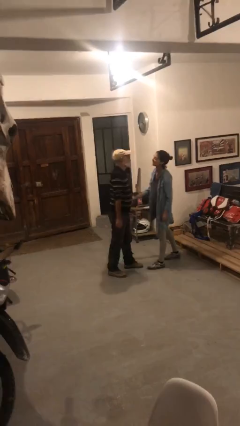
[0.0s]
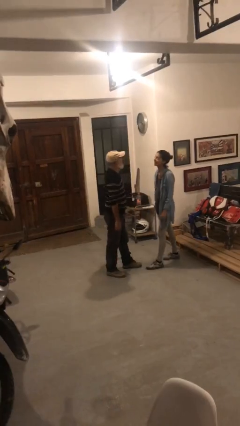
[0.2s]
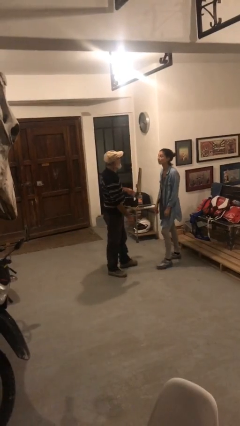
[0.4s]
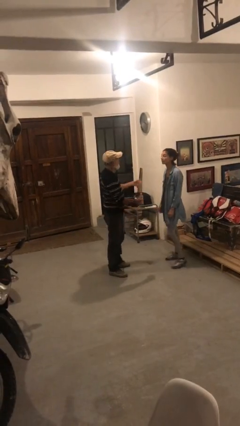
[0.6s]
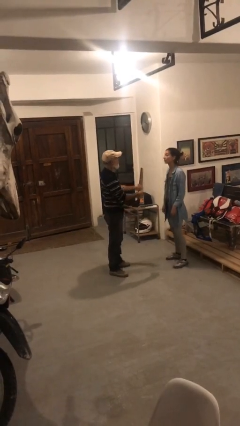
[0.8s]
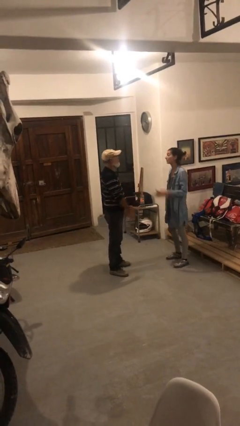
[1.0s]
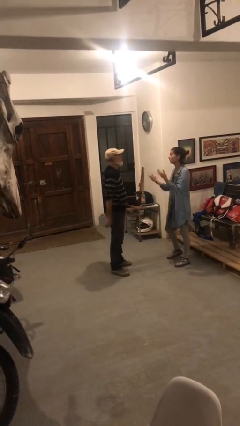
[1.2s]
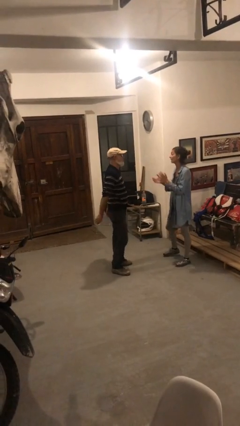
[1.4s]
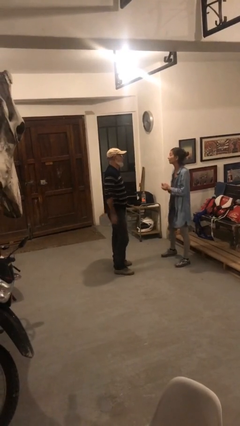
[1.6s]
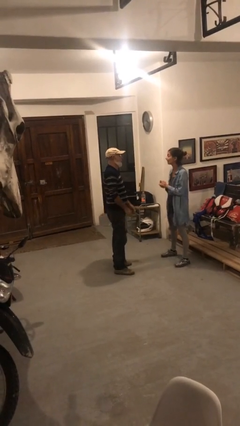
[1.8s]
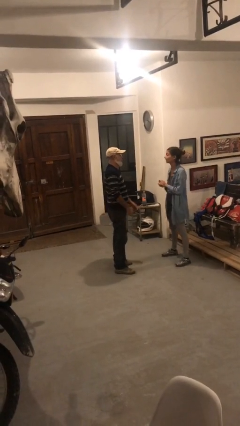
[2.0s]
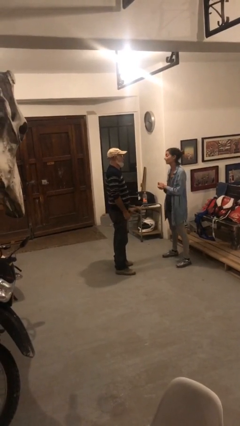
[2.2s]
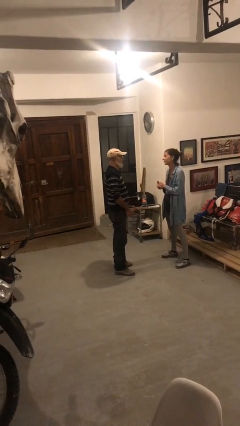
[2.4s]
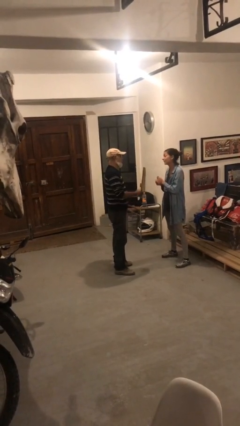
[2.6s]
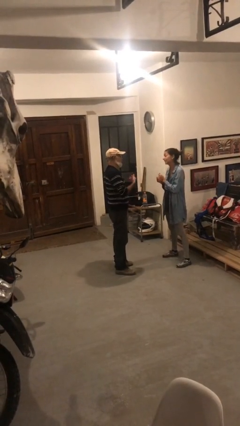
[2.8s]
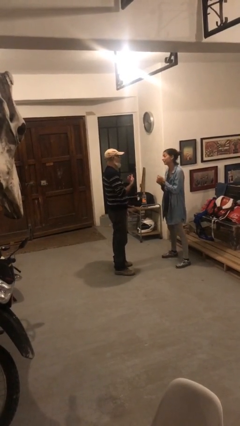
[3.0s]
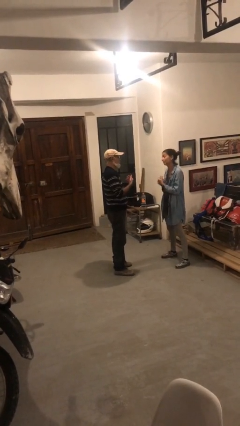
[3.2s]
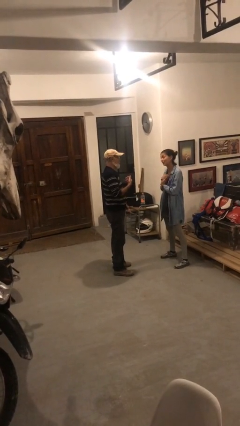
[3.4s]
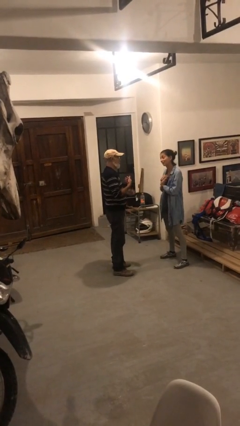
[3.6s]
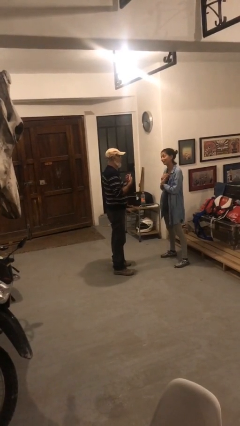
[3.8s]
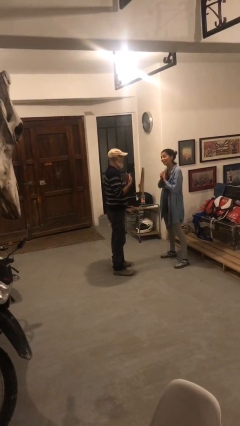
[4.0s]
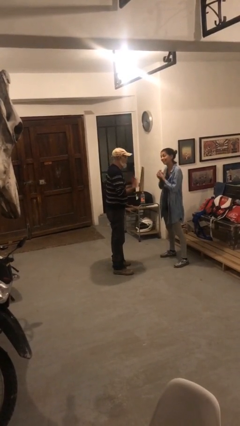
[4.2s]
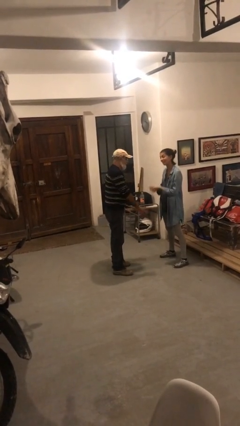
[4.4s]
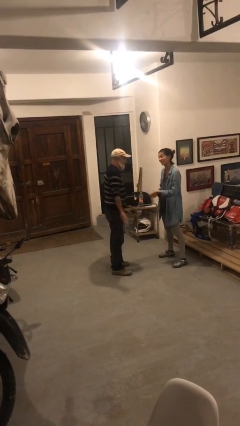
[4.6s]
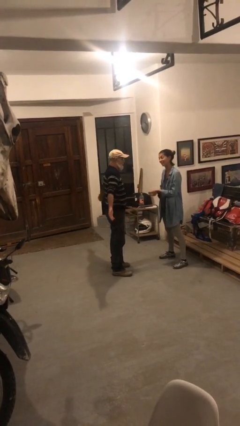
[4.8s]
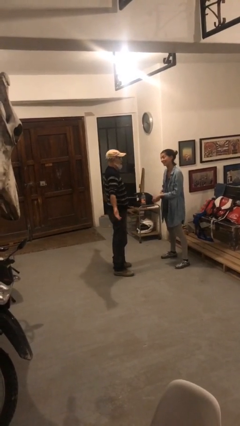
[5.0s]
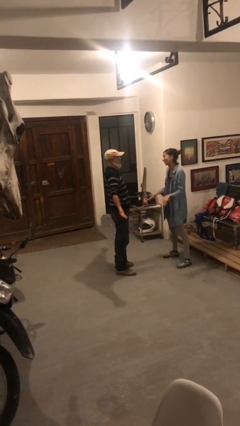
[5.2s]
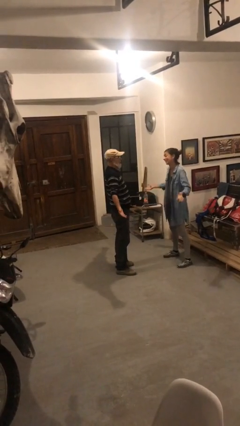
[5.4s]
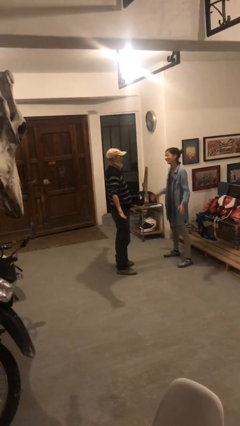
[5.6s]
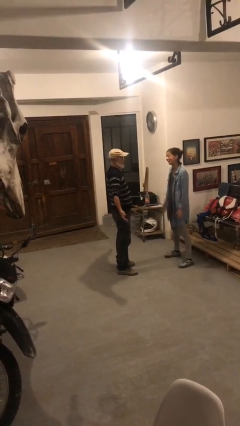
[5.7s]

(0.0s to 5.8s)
person talks to person

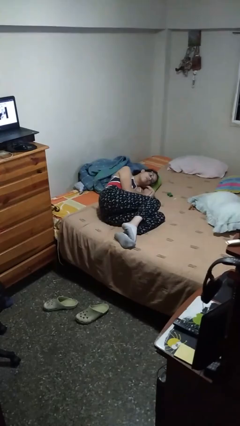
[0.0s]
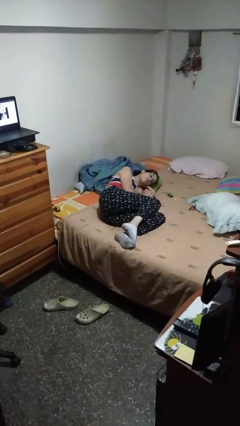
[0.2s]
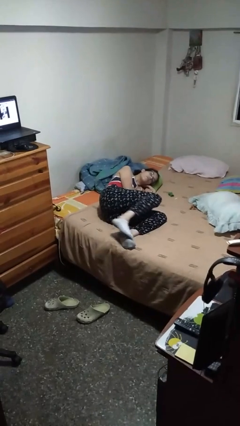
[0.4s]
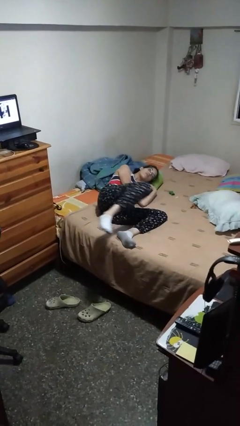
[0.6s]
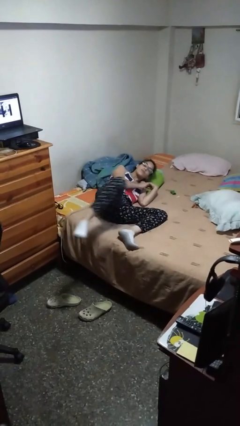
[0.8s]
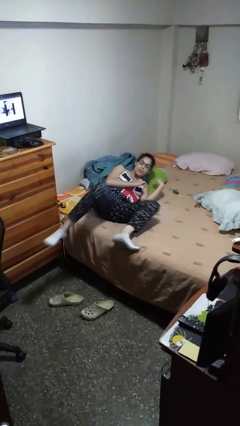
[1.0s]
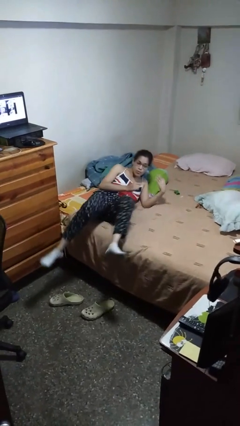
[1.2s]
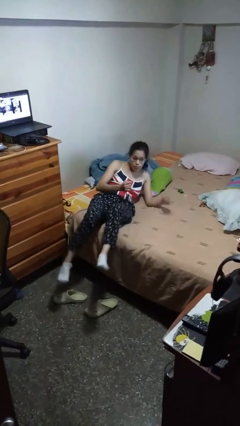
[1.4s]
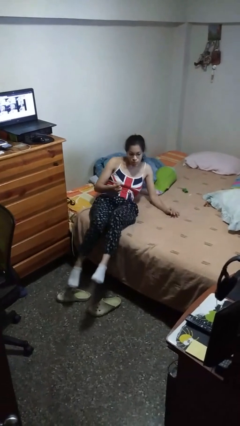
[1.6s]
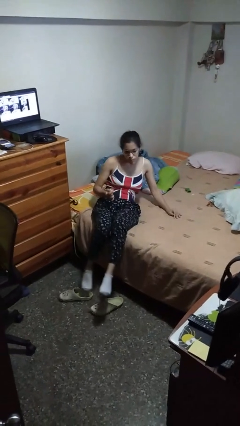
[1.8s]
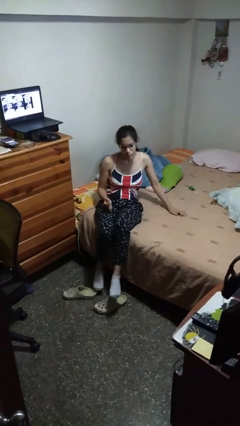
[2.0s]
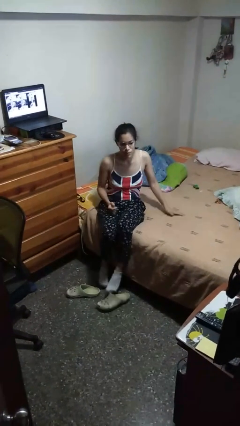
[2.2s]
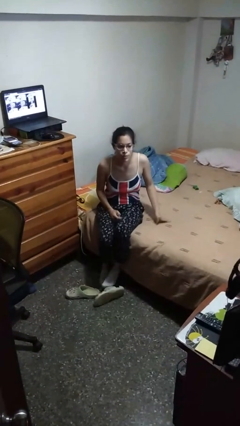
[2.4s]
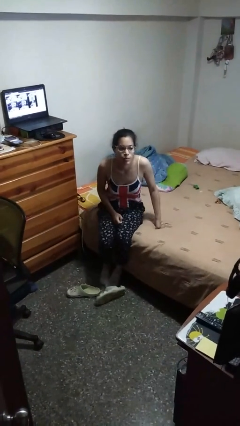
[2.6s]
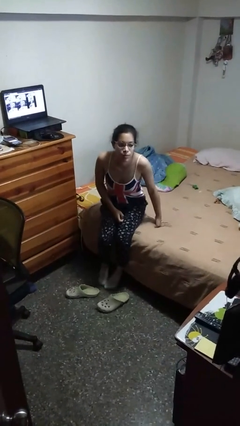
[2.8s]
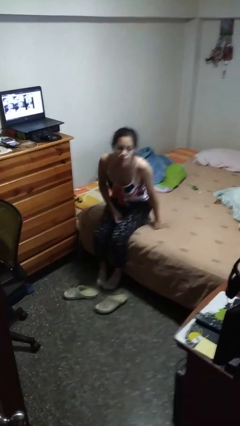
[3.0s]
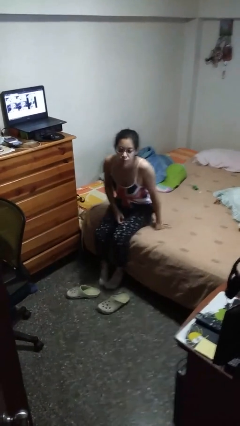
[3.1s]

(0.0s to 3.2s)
person stands up

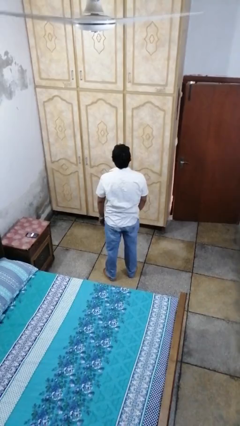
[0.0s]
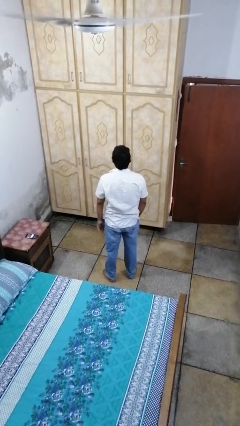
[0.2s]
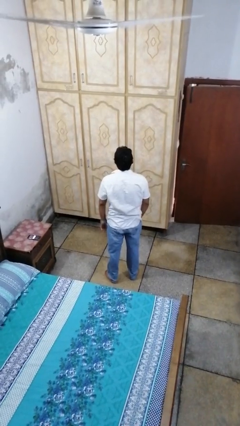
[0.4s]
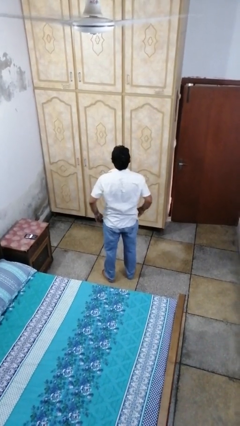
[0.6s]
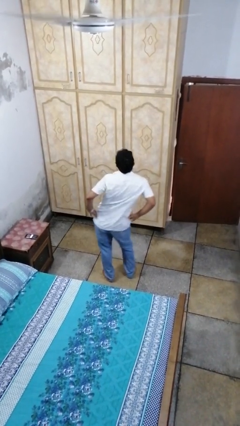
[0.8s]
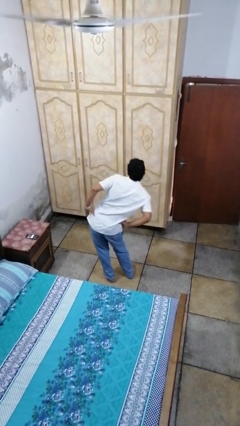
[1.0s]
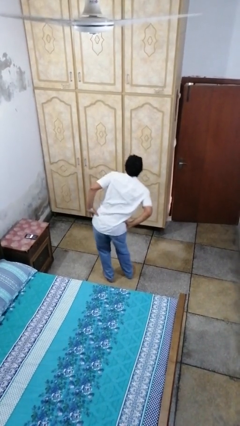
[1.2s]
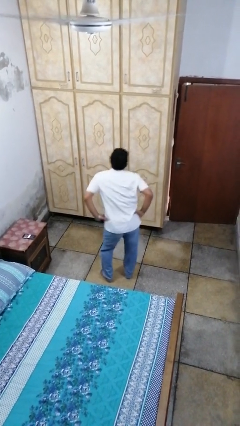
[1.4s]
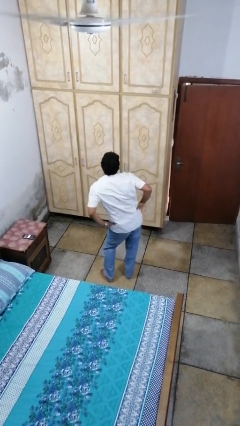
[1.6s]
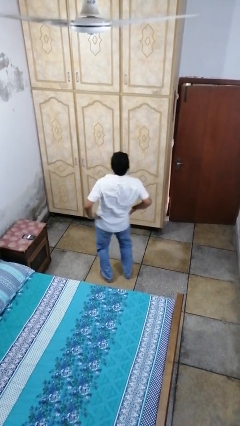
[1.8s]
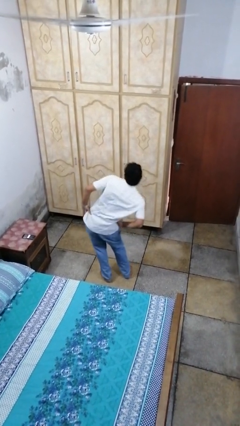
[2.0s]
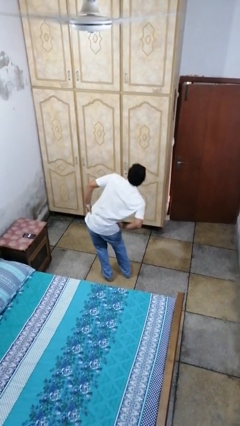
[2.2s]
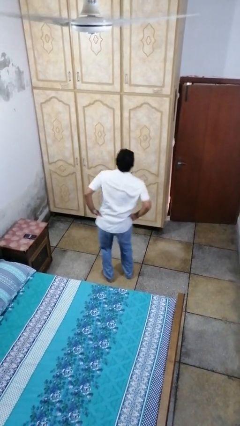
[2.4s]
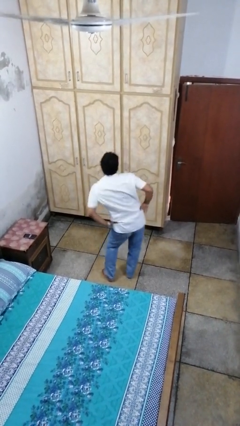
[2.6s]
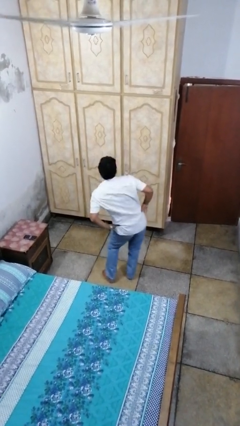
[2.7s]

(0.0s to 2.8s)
person wiggles hips

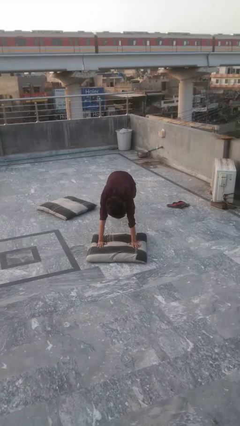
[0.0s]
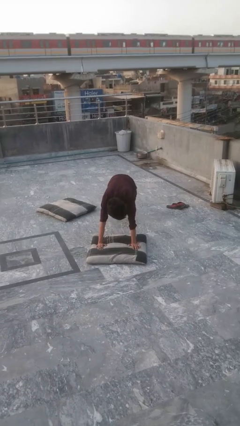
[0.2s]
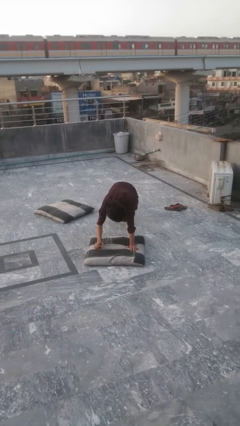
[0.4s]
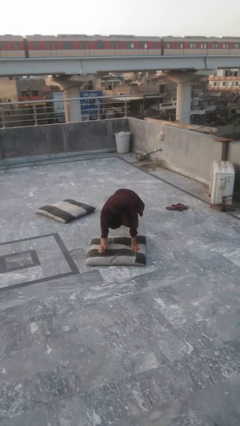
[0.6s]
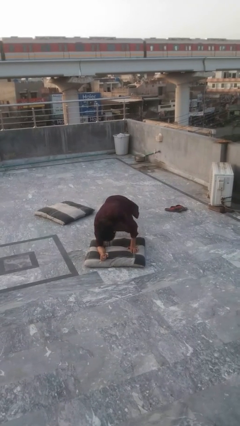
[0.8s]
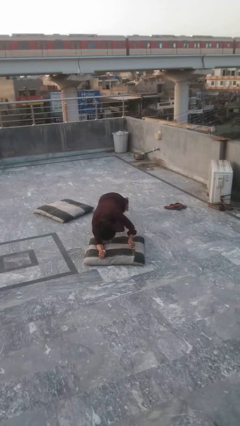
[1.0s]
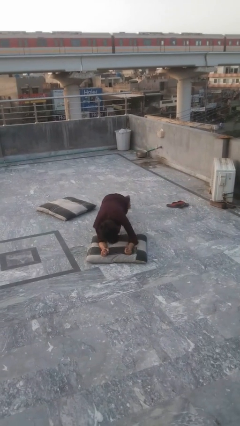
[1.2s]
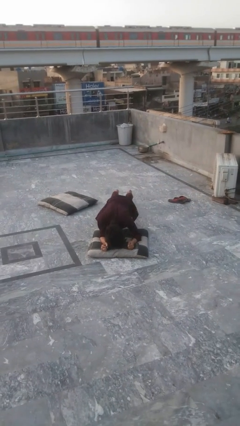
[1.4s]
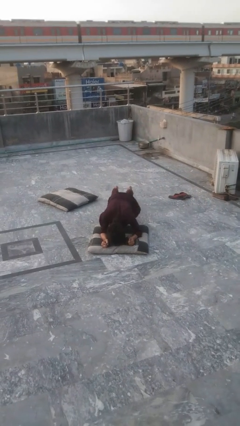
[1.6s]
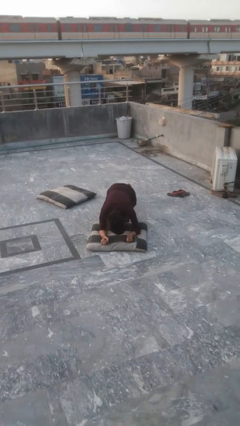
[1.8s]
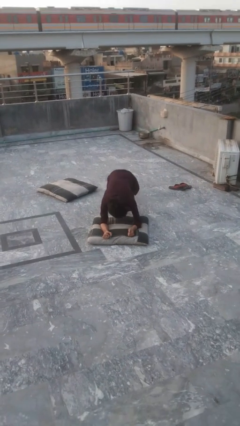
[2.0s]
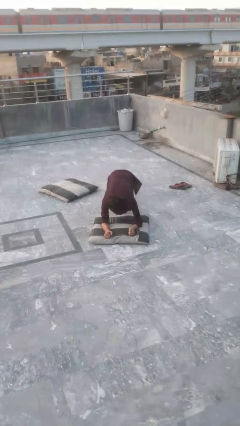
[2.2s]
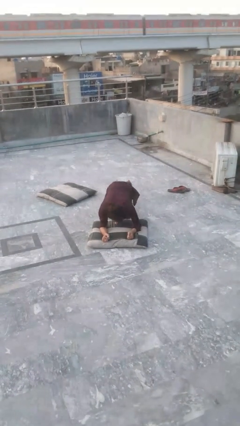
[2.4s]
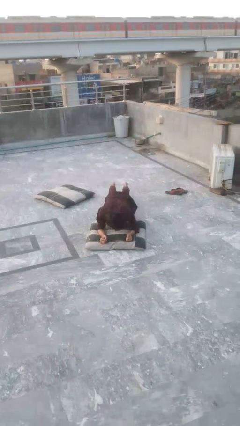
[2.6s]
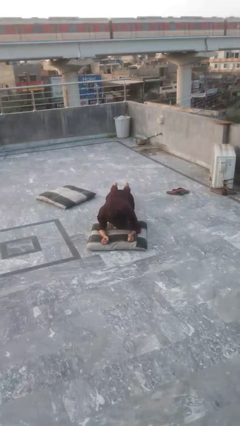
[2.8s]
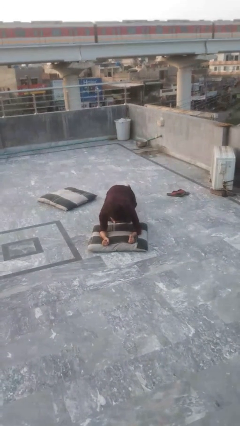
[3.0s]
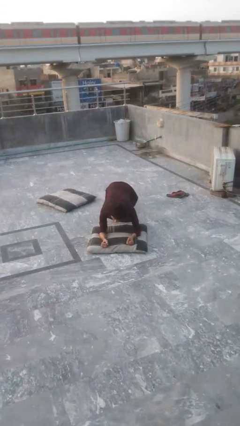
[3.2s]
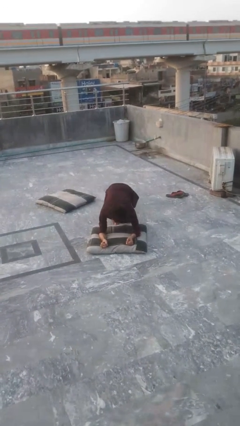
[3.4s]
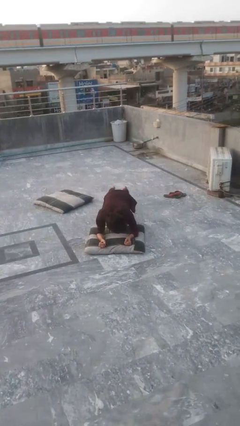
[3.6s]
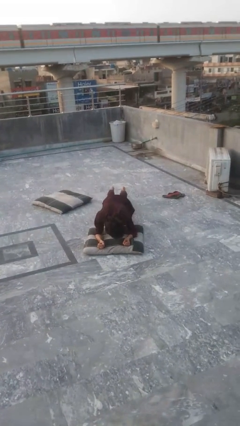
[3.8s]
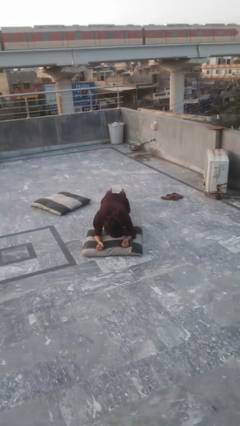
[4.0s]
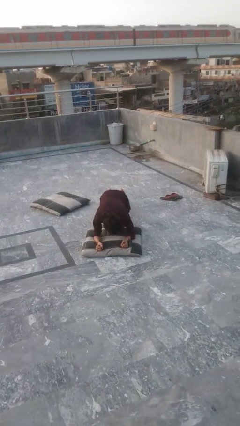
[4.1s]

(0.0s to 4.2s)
person exercises with plank

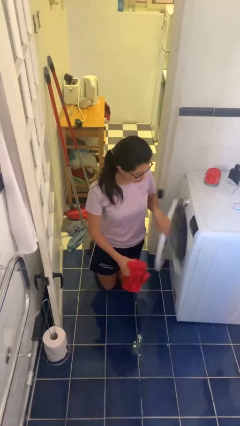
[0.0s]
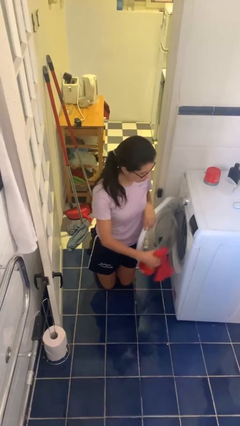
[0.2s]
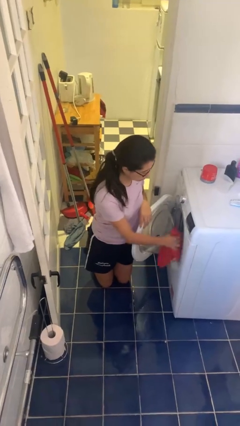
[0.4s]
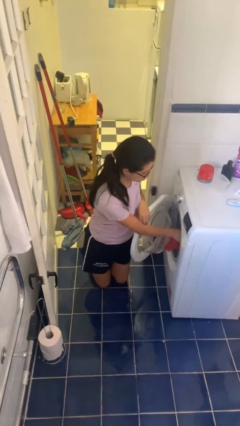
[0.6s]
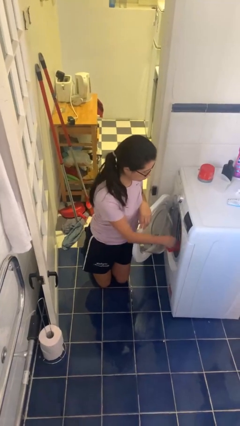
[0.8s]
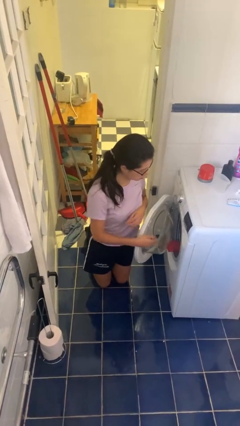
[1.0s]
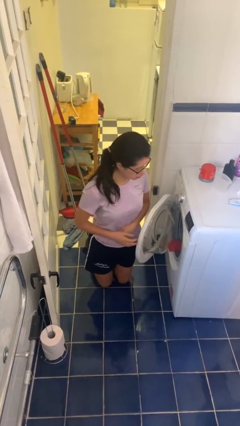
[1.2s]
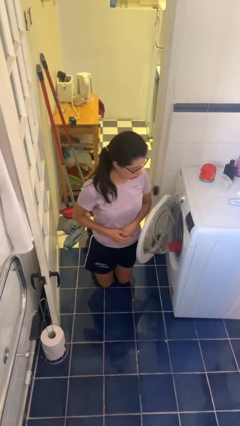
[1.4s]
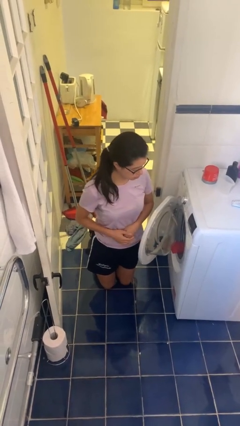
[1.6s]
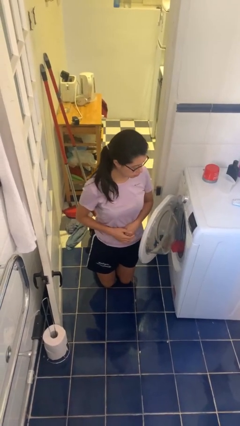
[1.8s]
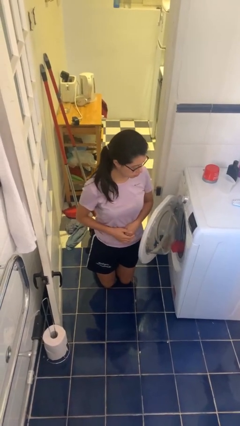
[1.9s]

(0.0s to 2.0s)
person loads dryer
